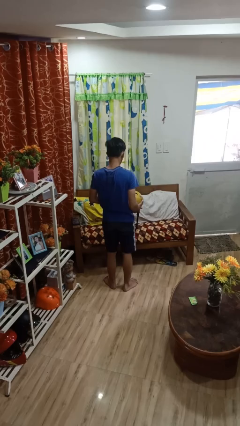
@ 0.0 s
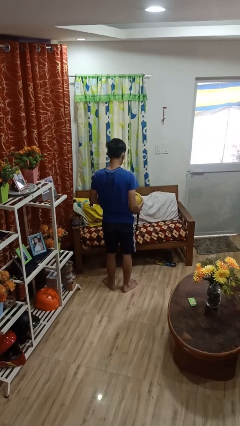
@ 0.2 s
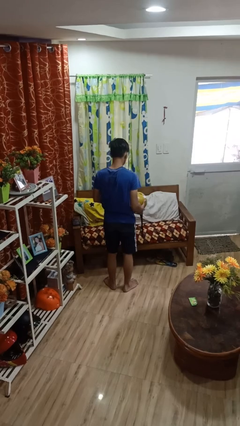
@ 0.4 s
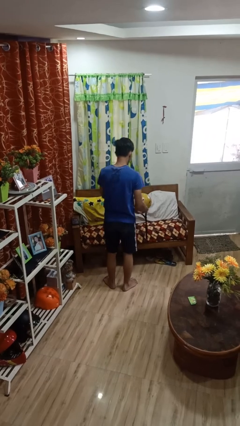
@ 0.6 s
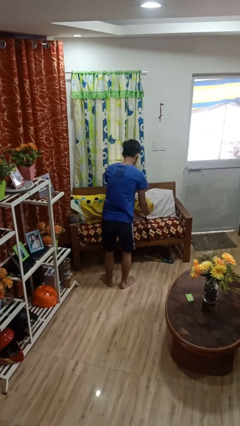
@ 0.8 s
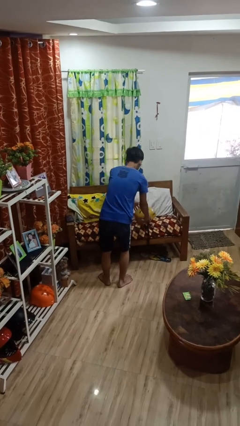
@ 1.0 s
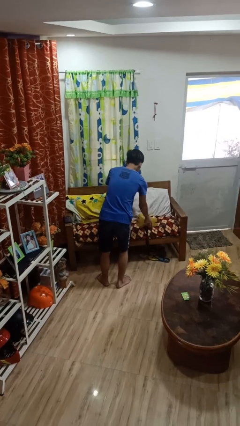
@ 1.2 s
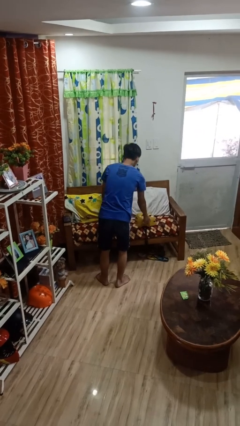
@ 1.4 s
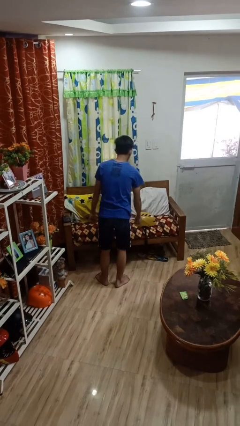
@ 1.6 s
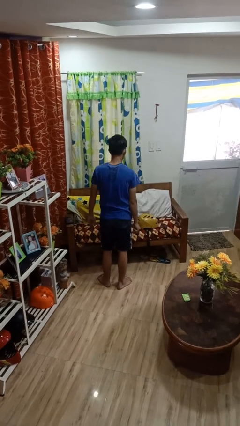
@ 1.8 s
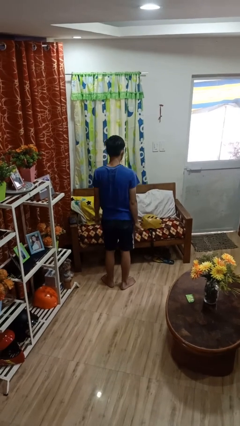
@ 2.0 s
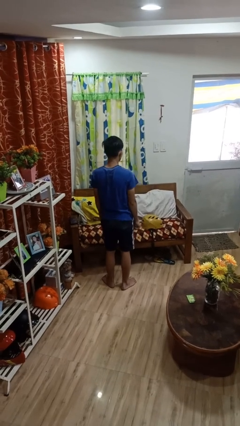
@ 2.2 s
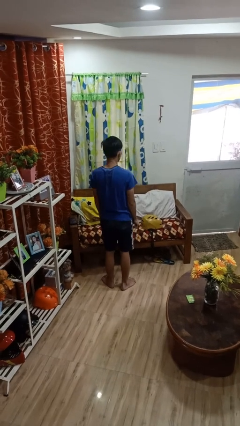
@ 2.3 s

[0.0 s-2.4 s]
person puts down object on couch

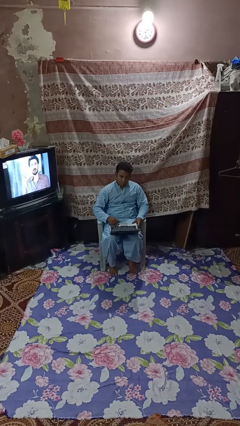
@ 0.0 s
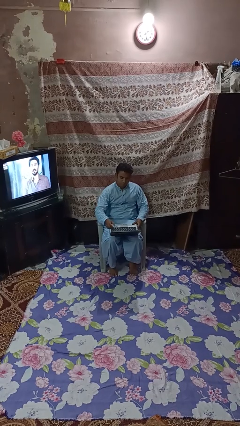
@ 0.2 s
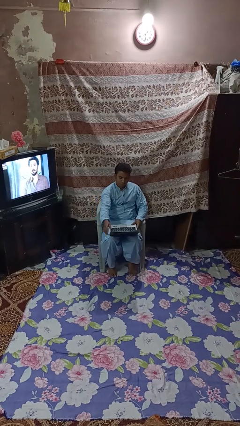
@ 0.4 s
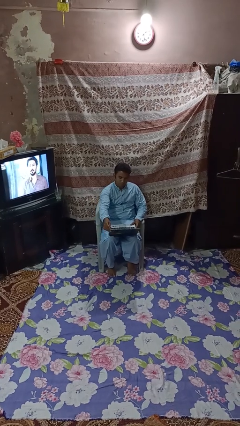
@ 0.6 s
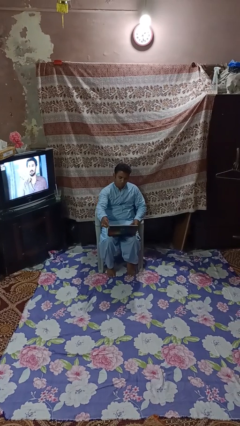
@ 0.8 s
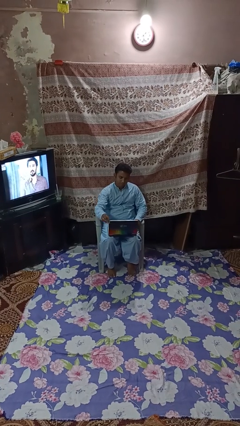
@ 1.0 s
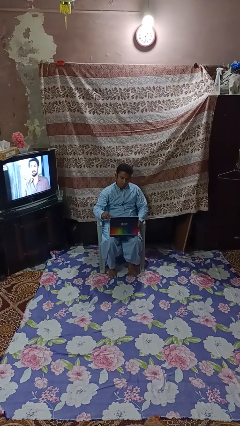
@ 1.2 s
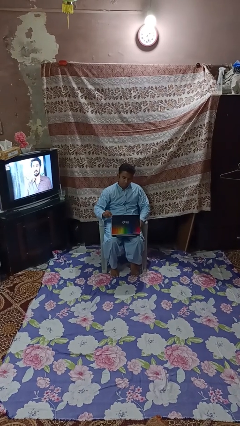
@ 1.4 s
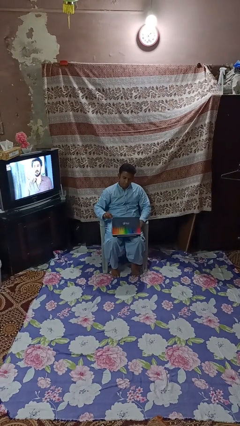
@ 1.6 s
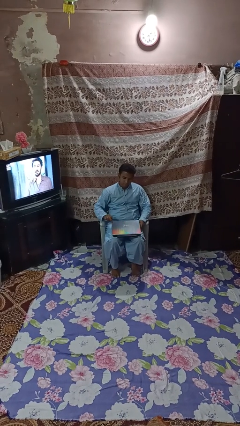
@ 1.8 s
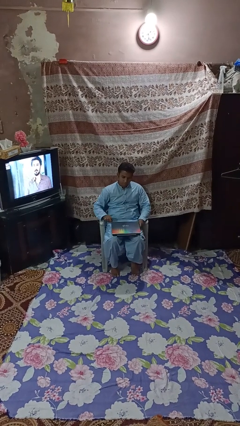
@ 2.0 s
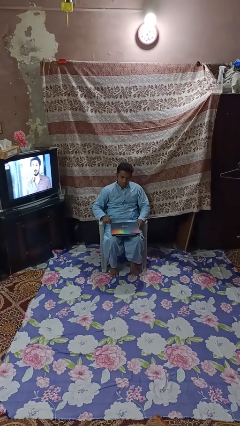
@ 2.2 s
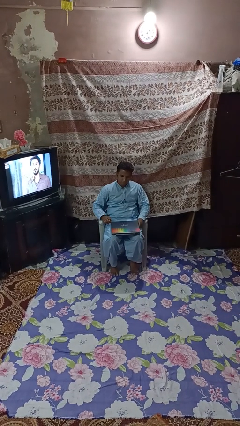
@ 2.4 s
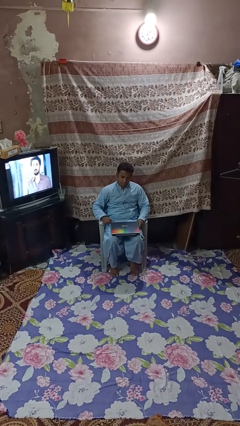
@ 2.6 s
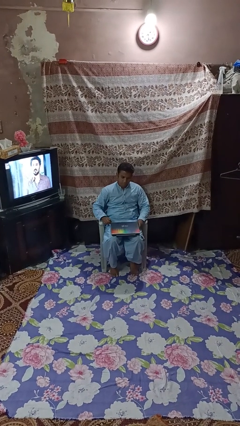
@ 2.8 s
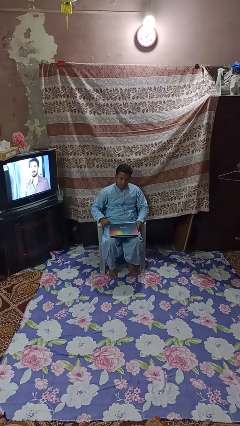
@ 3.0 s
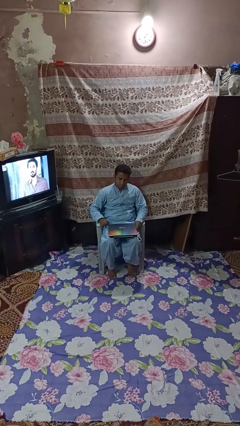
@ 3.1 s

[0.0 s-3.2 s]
person closes laptop

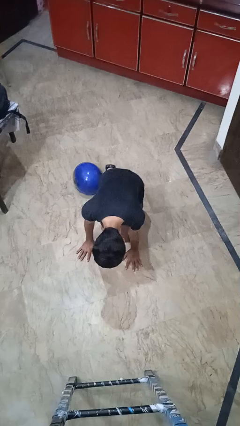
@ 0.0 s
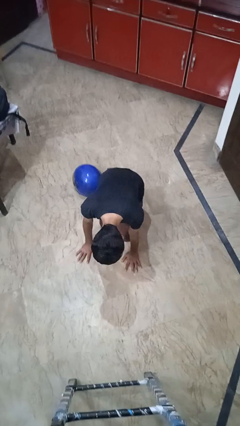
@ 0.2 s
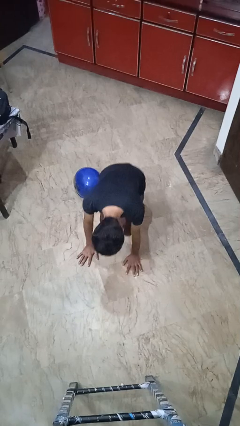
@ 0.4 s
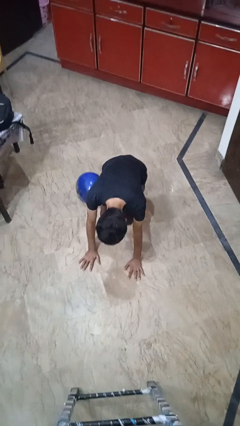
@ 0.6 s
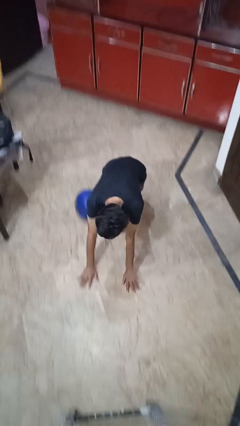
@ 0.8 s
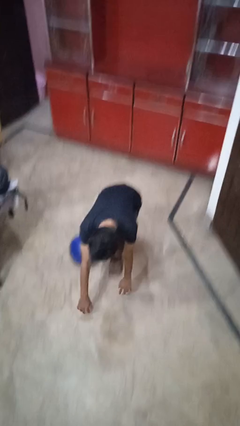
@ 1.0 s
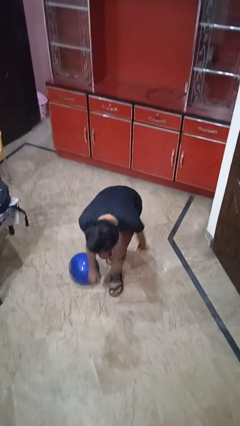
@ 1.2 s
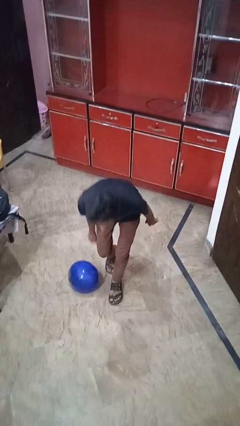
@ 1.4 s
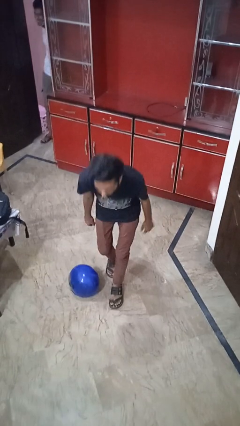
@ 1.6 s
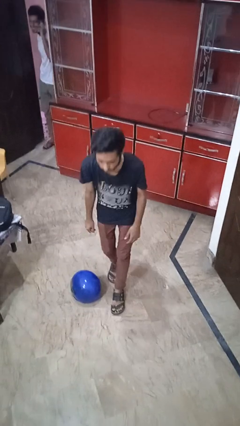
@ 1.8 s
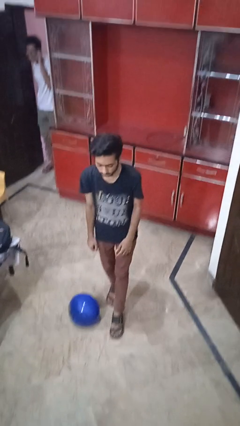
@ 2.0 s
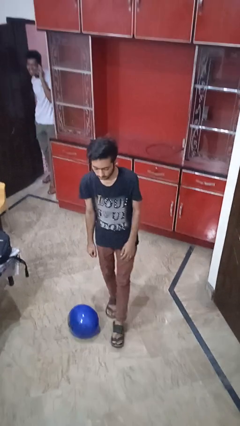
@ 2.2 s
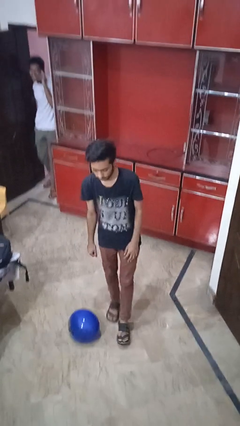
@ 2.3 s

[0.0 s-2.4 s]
person puts phone into pocket

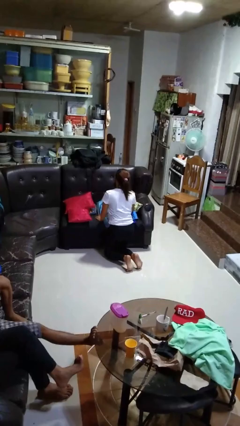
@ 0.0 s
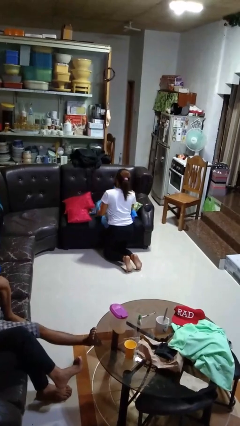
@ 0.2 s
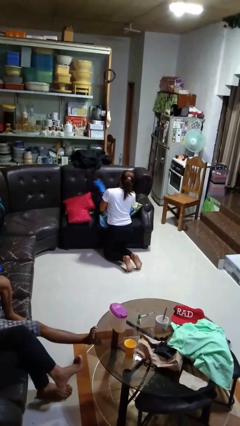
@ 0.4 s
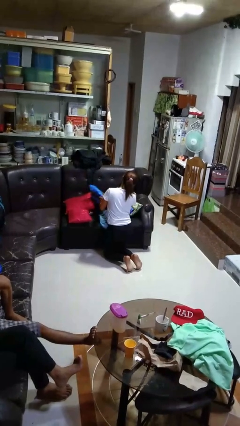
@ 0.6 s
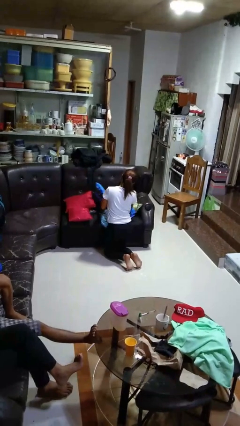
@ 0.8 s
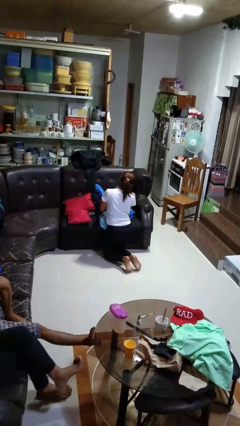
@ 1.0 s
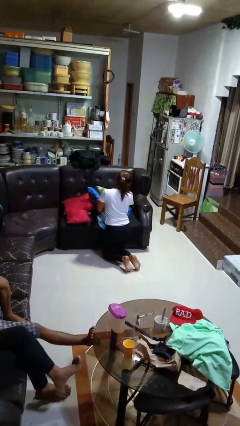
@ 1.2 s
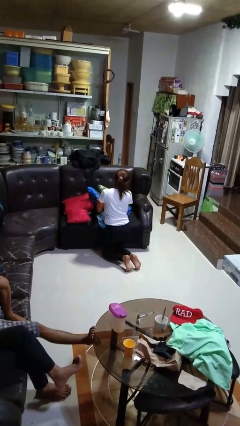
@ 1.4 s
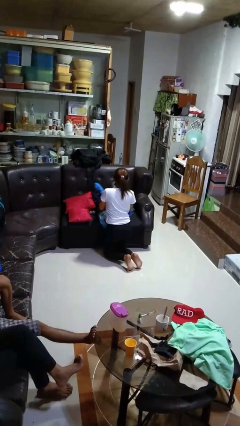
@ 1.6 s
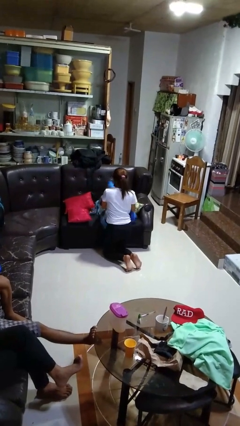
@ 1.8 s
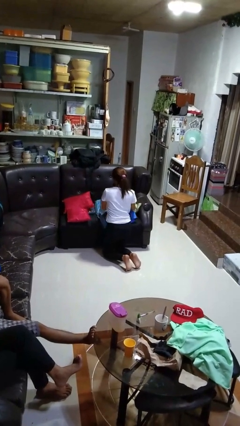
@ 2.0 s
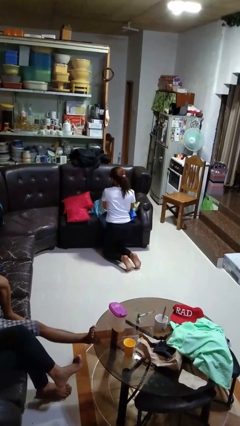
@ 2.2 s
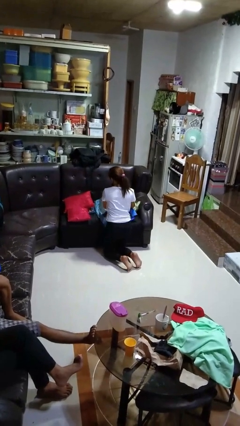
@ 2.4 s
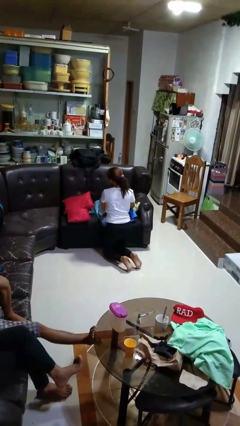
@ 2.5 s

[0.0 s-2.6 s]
person searches in couch

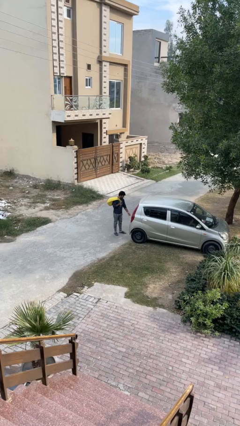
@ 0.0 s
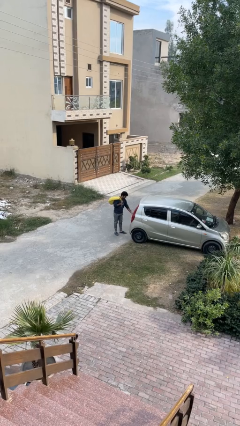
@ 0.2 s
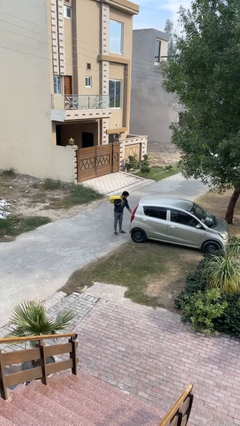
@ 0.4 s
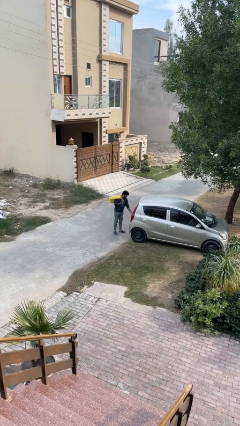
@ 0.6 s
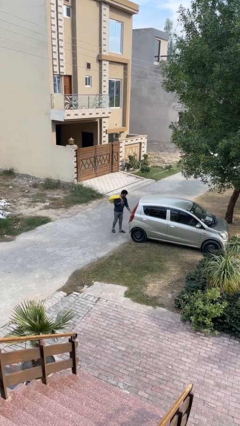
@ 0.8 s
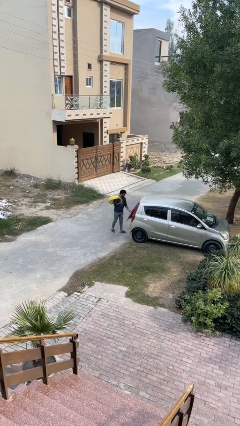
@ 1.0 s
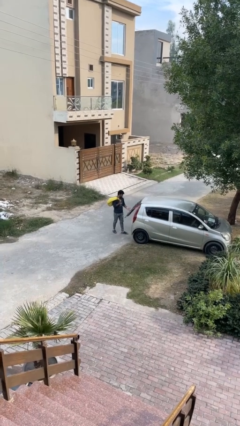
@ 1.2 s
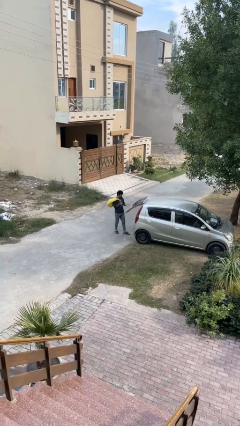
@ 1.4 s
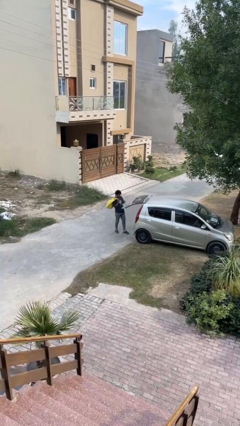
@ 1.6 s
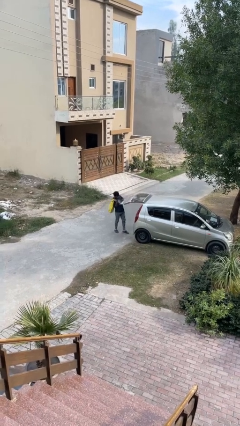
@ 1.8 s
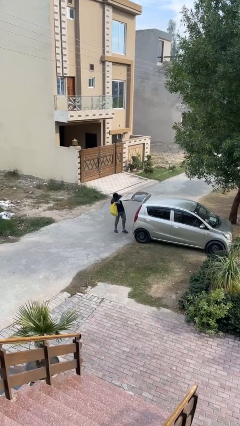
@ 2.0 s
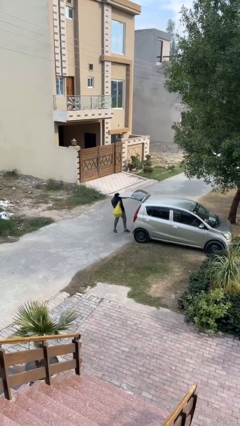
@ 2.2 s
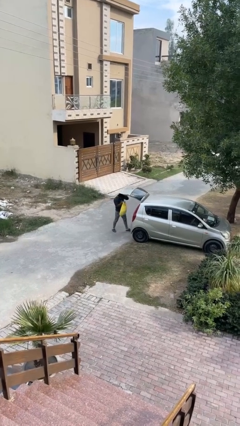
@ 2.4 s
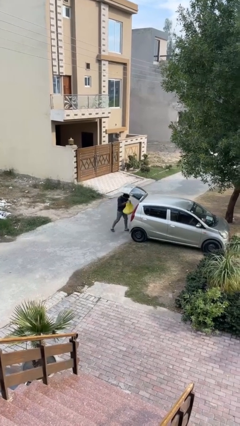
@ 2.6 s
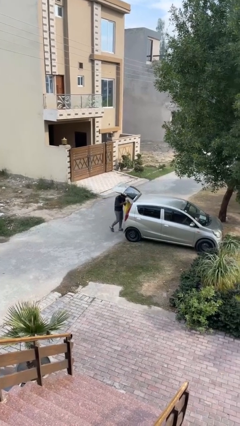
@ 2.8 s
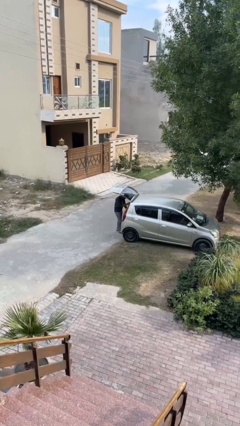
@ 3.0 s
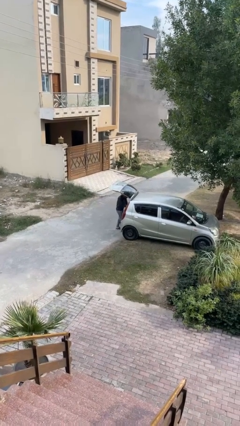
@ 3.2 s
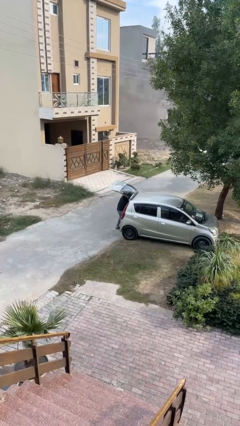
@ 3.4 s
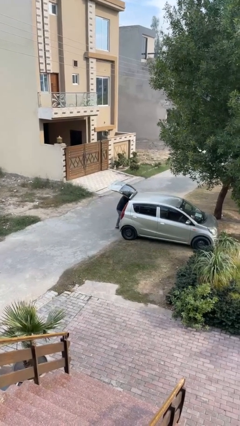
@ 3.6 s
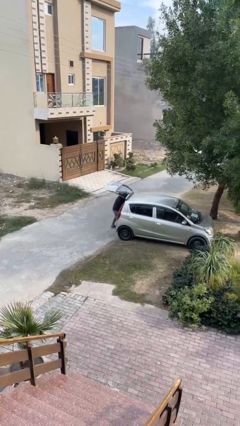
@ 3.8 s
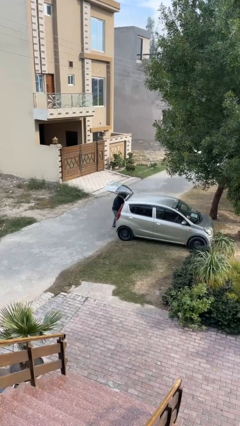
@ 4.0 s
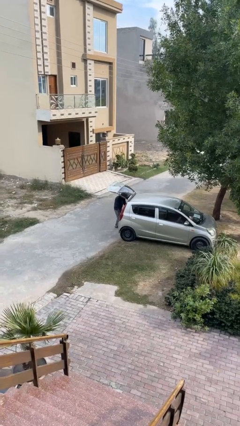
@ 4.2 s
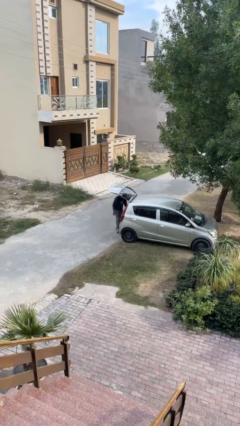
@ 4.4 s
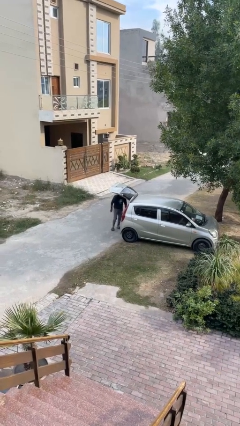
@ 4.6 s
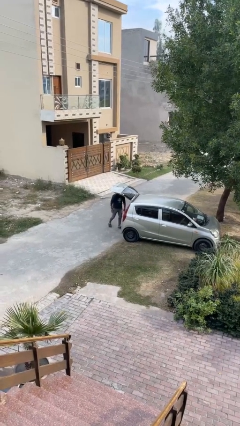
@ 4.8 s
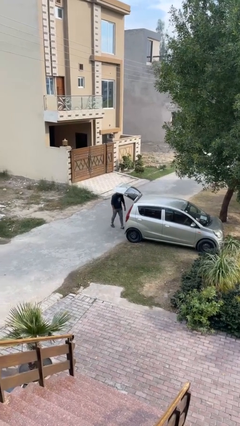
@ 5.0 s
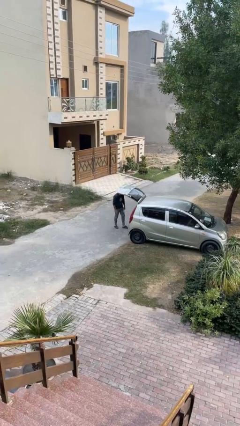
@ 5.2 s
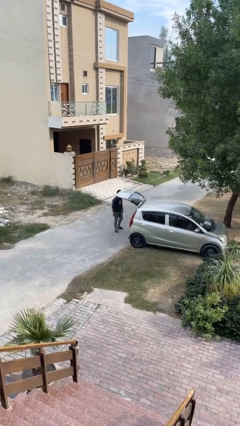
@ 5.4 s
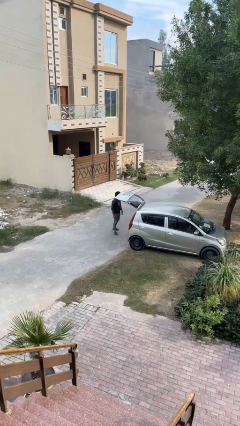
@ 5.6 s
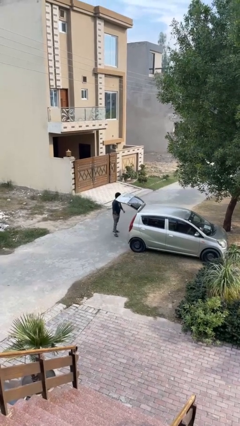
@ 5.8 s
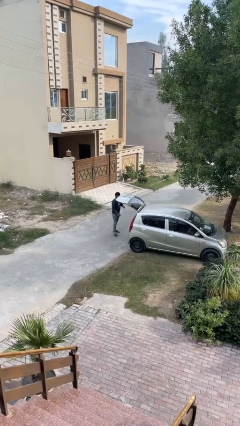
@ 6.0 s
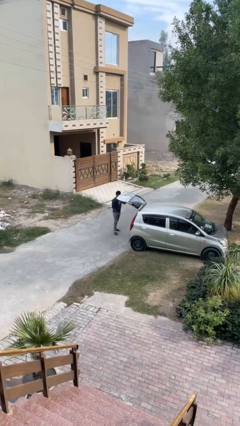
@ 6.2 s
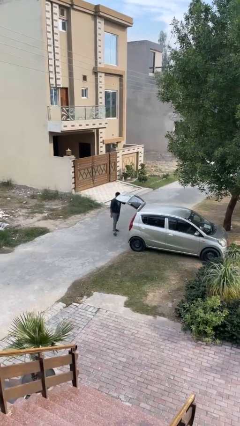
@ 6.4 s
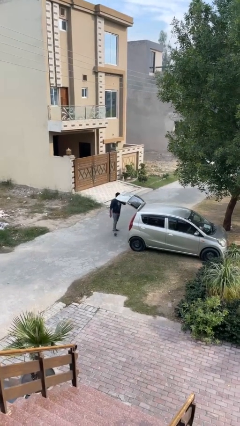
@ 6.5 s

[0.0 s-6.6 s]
person loads car
